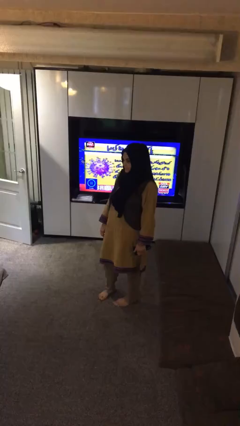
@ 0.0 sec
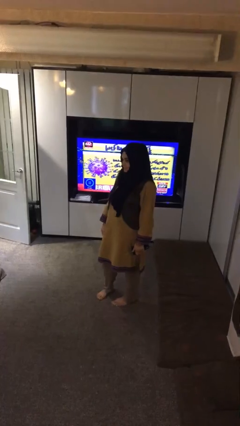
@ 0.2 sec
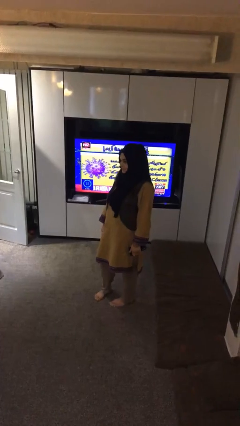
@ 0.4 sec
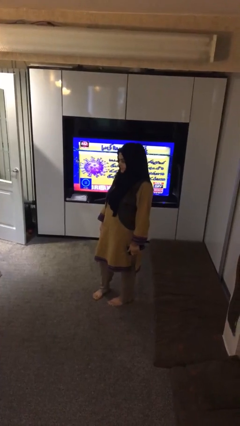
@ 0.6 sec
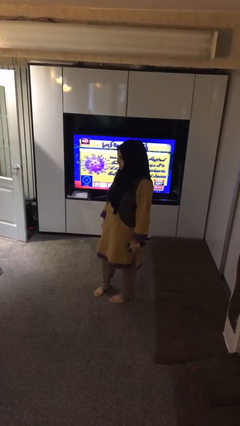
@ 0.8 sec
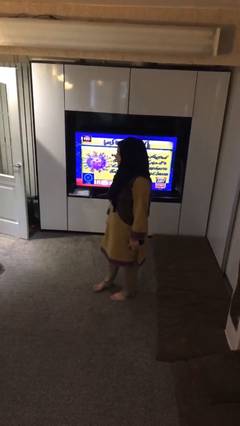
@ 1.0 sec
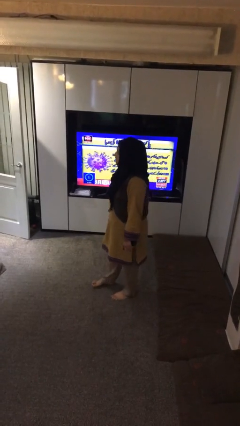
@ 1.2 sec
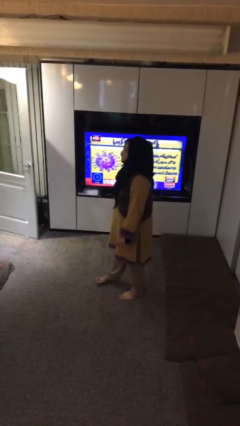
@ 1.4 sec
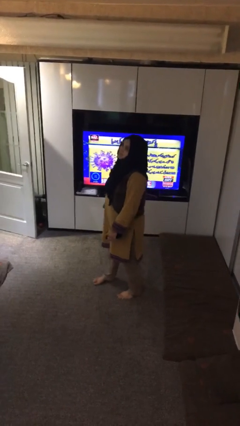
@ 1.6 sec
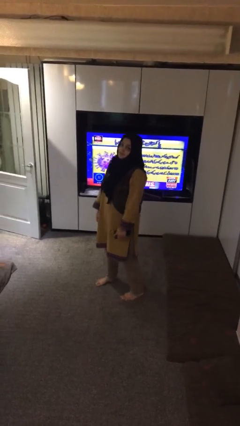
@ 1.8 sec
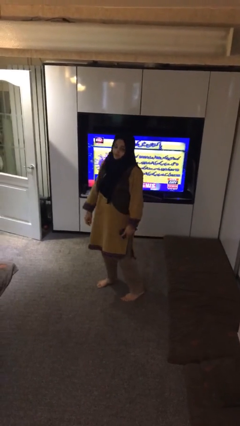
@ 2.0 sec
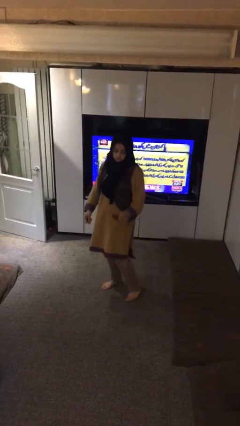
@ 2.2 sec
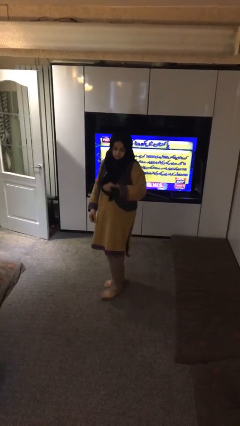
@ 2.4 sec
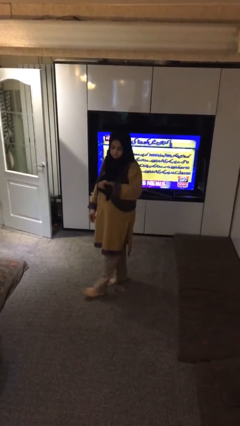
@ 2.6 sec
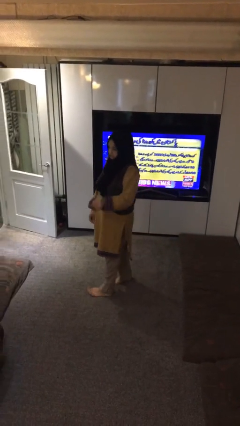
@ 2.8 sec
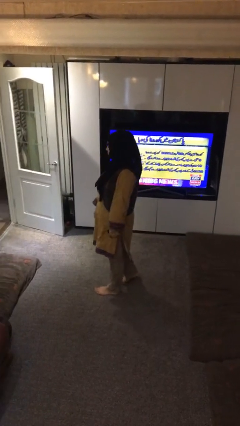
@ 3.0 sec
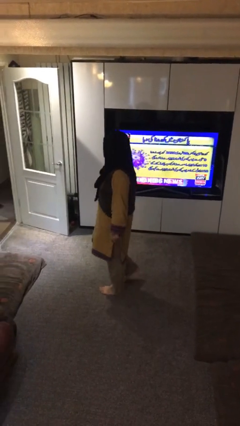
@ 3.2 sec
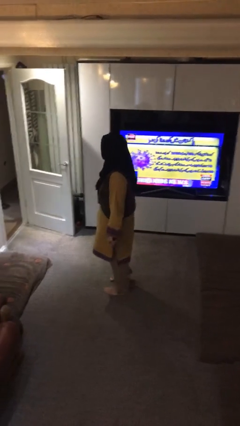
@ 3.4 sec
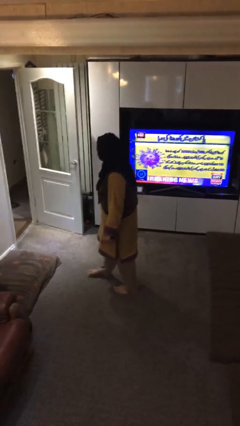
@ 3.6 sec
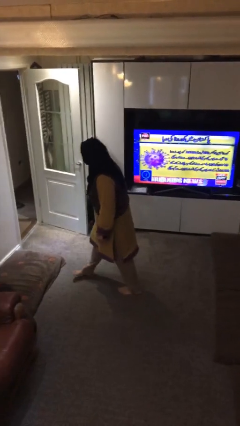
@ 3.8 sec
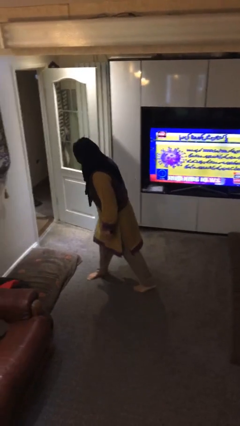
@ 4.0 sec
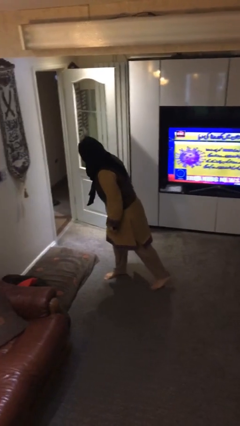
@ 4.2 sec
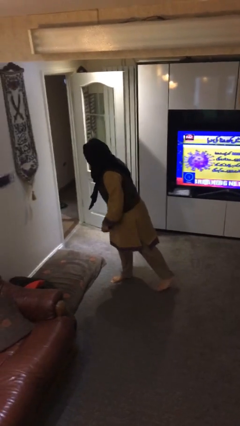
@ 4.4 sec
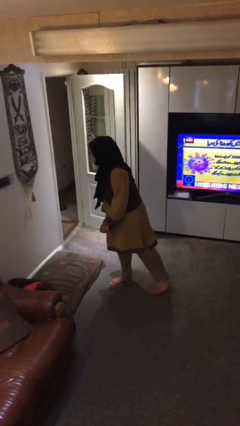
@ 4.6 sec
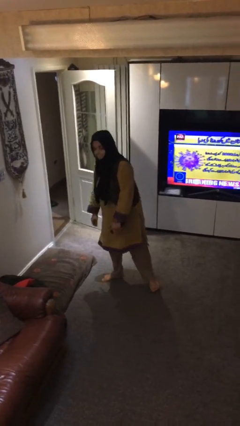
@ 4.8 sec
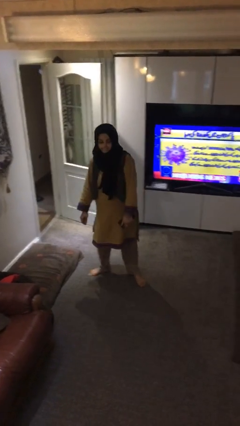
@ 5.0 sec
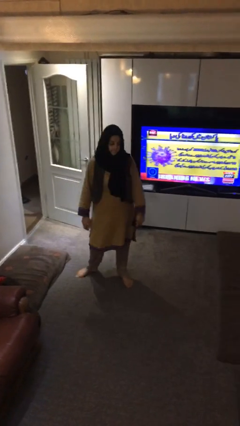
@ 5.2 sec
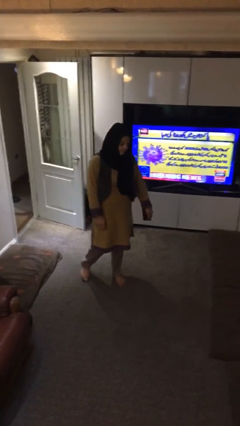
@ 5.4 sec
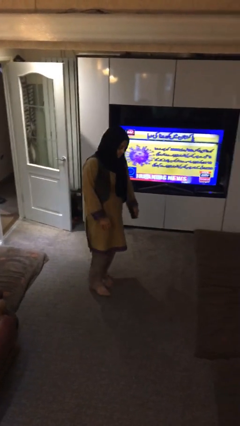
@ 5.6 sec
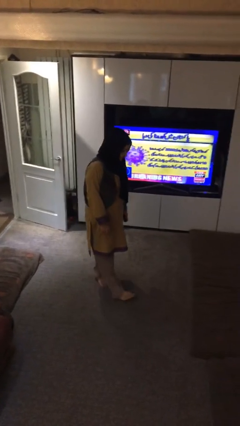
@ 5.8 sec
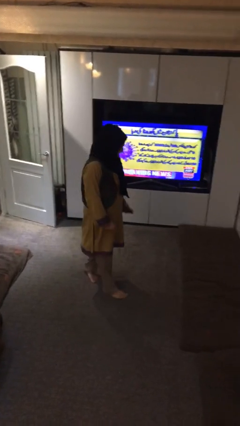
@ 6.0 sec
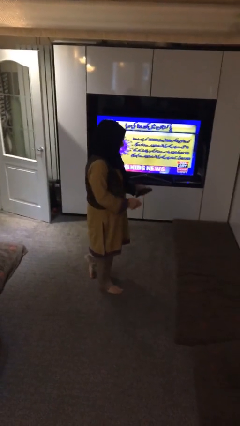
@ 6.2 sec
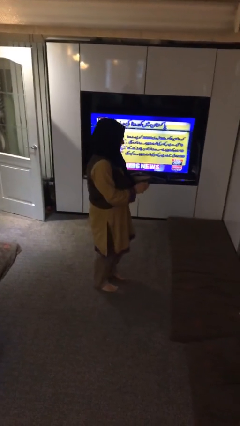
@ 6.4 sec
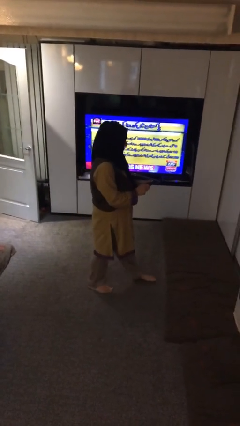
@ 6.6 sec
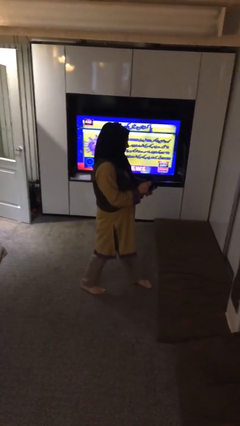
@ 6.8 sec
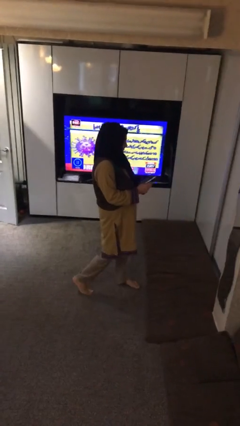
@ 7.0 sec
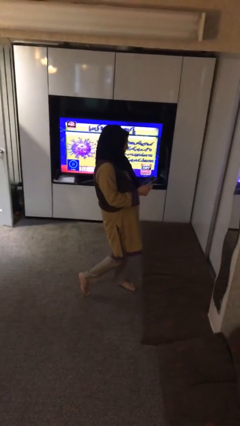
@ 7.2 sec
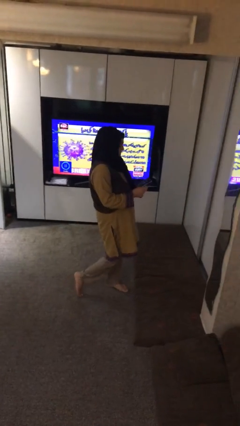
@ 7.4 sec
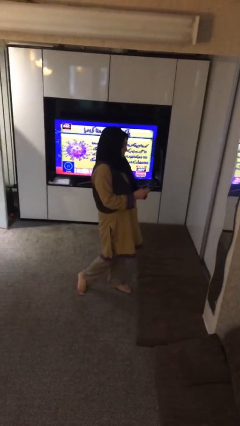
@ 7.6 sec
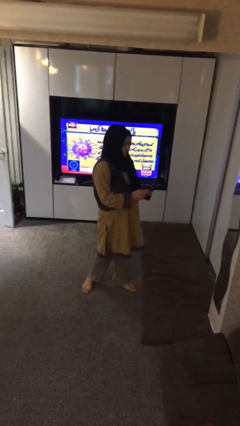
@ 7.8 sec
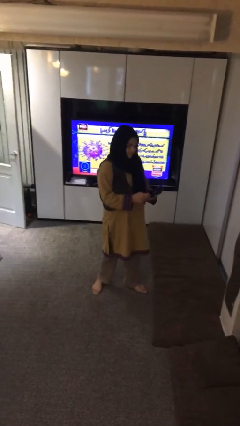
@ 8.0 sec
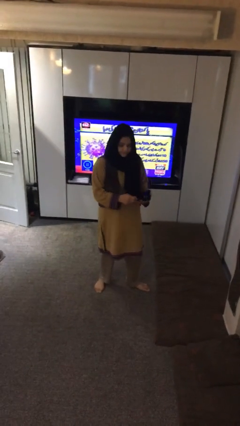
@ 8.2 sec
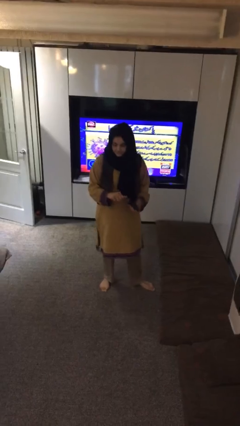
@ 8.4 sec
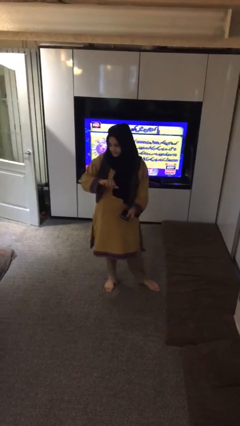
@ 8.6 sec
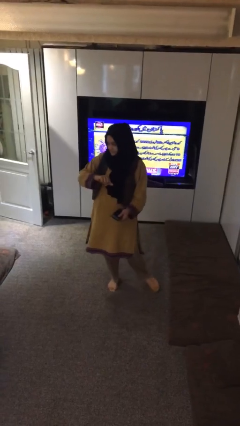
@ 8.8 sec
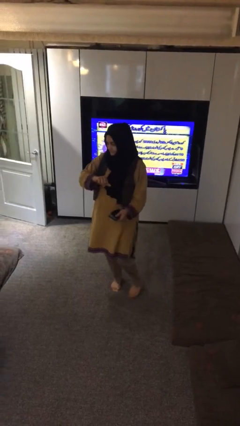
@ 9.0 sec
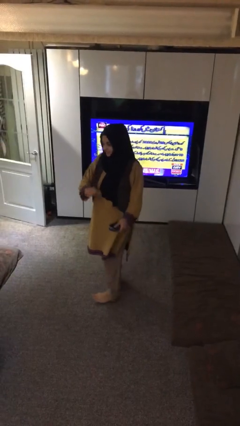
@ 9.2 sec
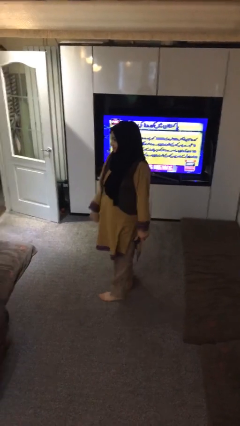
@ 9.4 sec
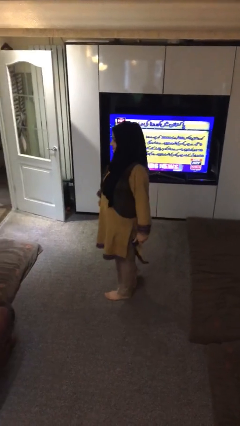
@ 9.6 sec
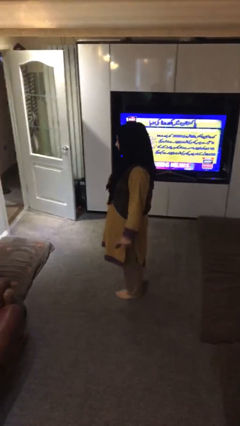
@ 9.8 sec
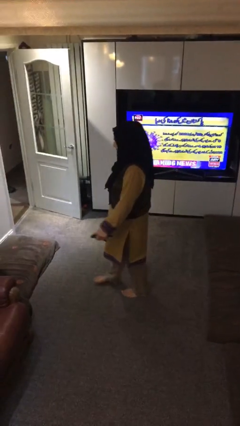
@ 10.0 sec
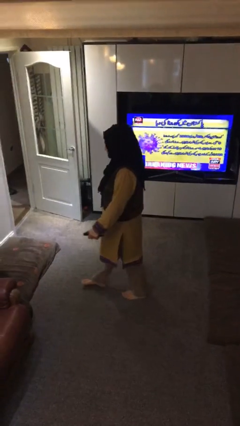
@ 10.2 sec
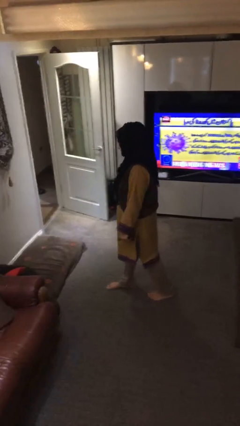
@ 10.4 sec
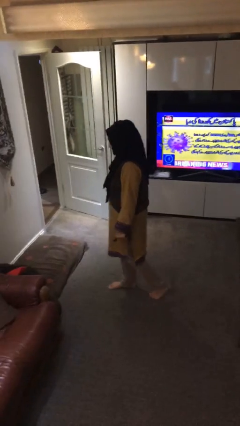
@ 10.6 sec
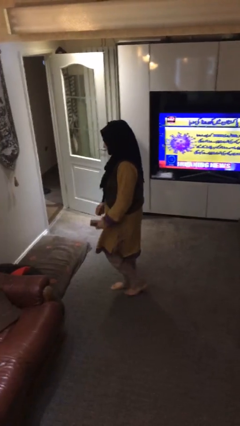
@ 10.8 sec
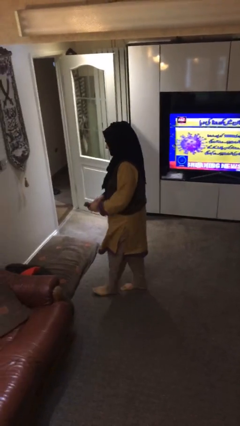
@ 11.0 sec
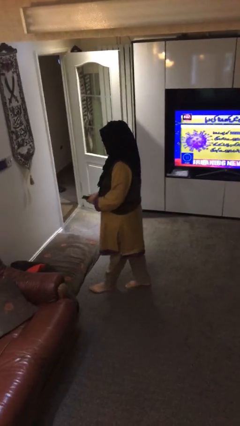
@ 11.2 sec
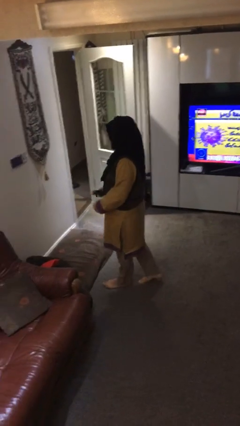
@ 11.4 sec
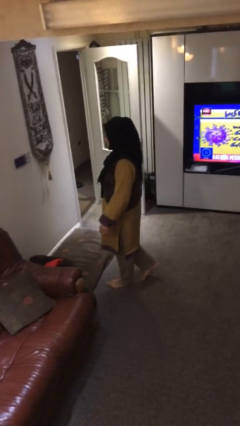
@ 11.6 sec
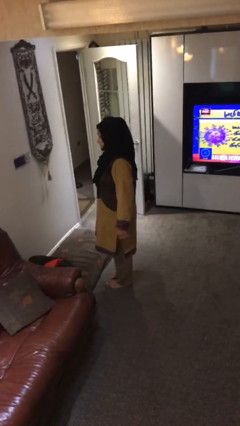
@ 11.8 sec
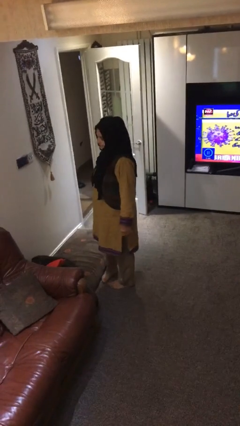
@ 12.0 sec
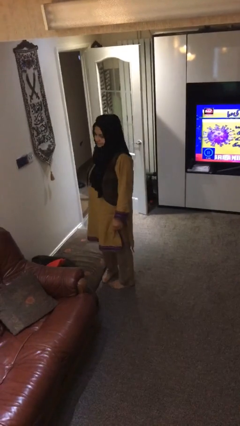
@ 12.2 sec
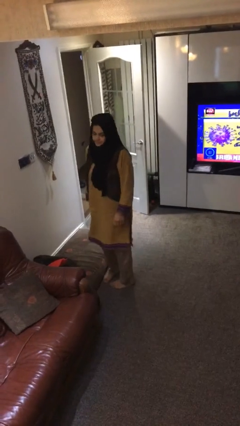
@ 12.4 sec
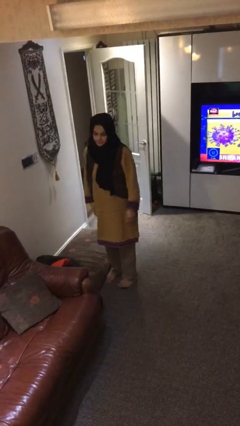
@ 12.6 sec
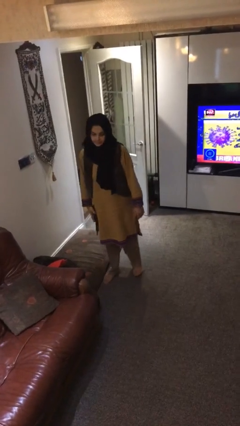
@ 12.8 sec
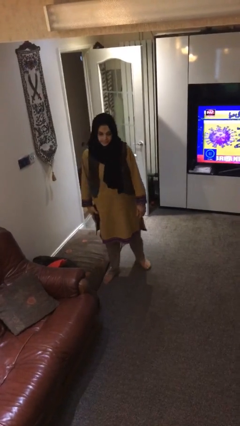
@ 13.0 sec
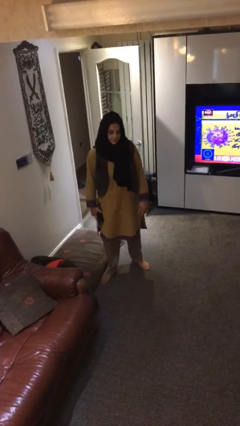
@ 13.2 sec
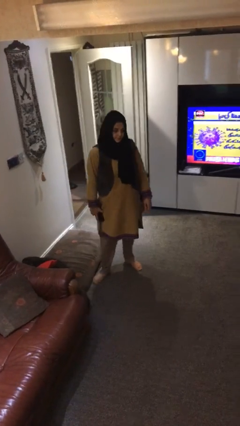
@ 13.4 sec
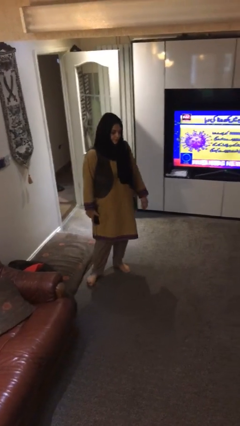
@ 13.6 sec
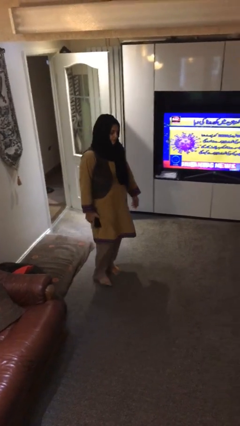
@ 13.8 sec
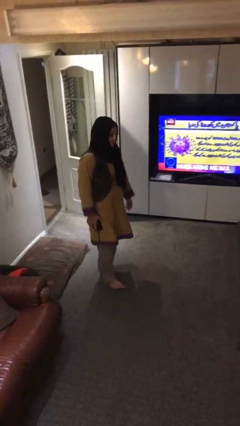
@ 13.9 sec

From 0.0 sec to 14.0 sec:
person walks

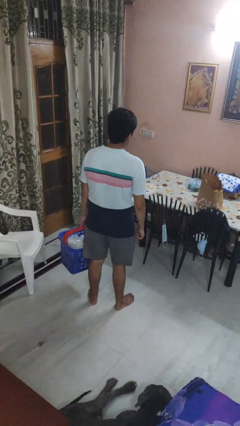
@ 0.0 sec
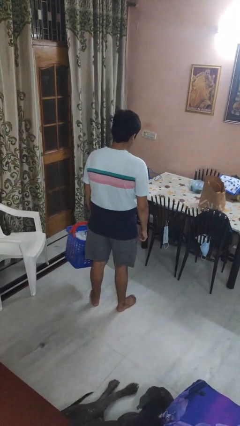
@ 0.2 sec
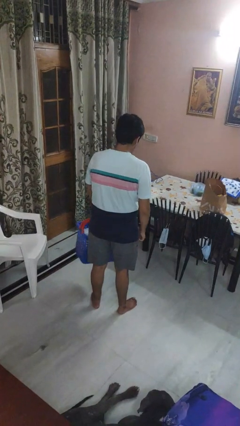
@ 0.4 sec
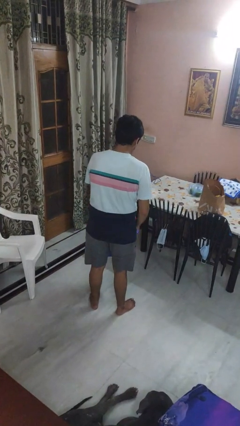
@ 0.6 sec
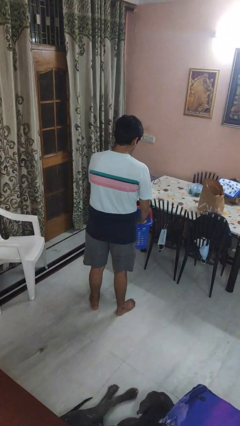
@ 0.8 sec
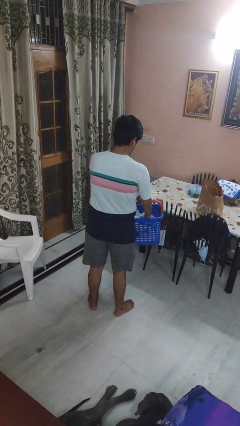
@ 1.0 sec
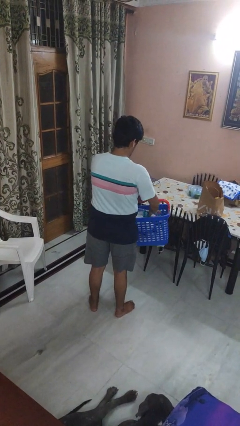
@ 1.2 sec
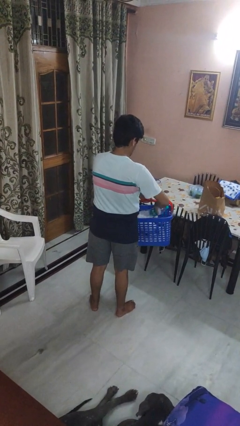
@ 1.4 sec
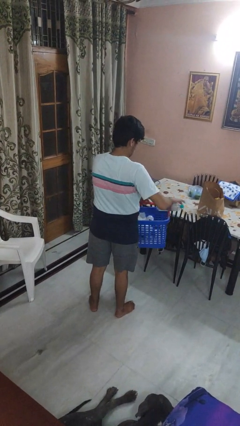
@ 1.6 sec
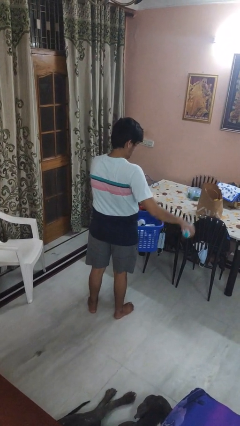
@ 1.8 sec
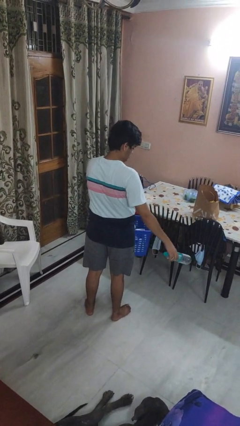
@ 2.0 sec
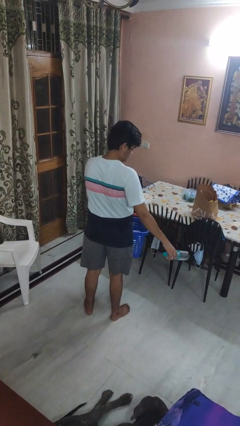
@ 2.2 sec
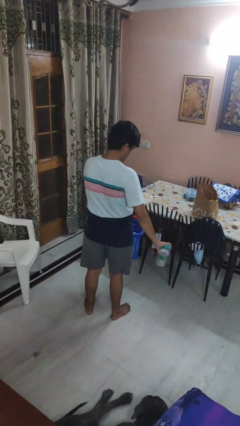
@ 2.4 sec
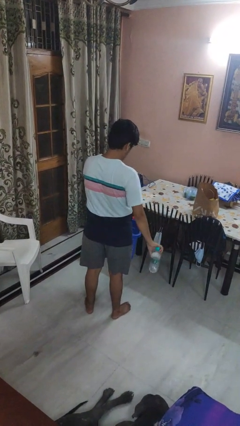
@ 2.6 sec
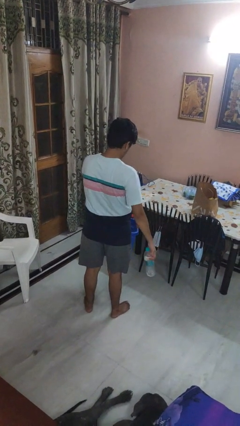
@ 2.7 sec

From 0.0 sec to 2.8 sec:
person takes object from basket

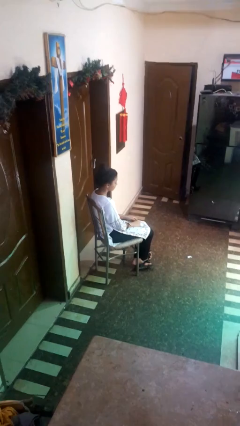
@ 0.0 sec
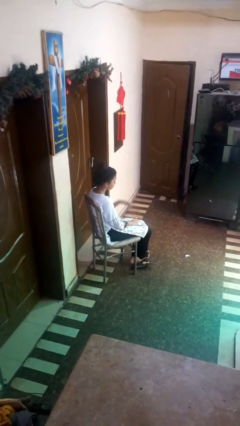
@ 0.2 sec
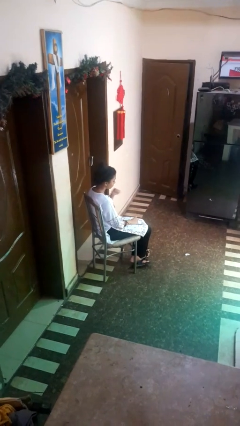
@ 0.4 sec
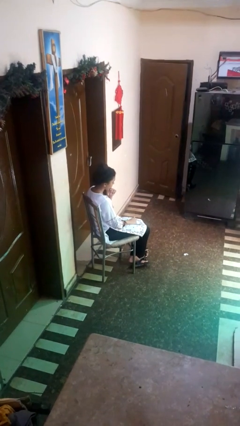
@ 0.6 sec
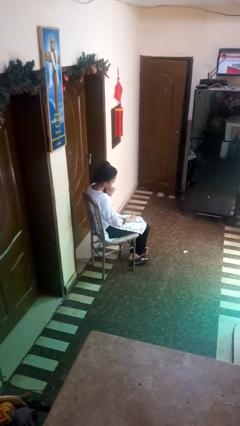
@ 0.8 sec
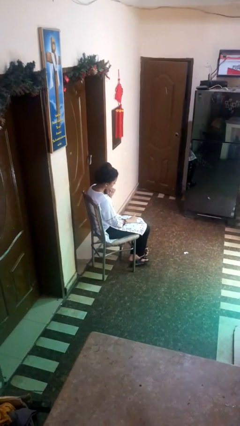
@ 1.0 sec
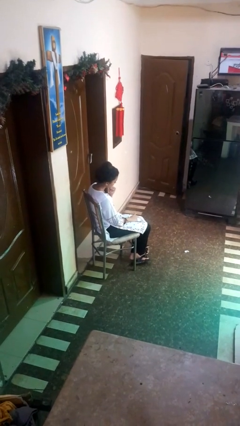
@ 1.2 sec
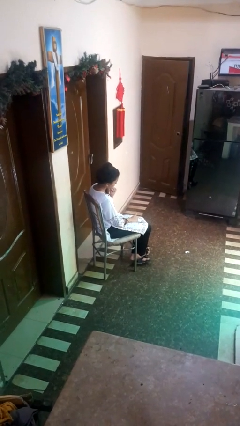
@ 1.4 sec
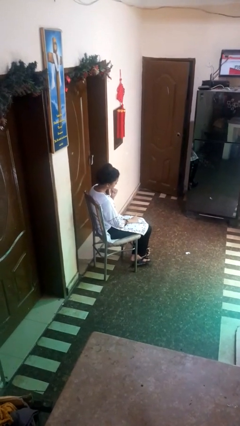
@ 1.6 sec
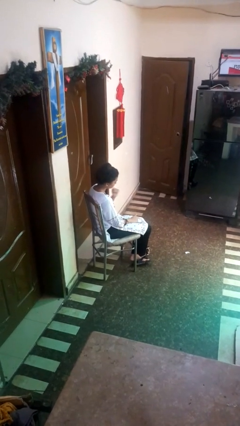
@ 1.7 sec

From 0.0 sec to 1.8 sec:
person strokes chin
